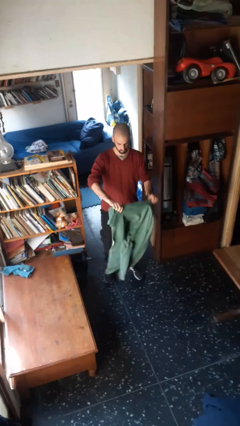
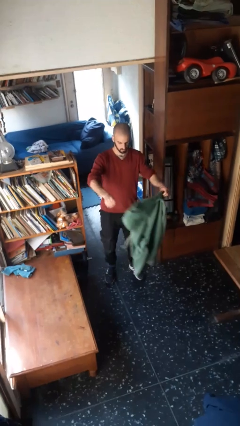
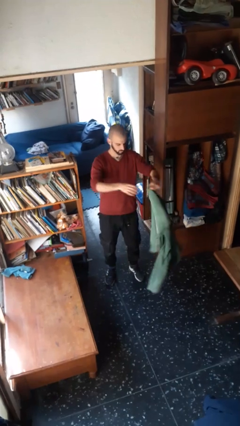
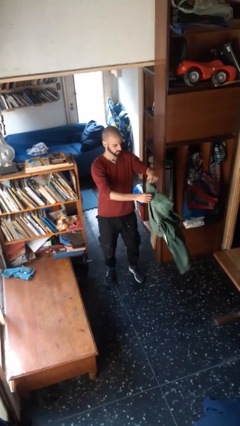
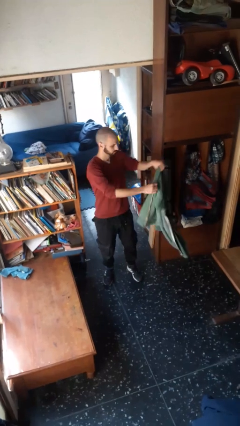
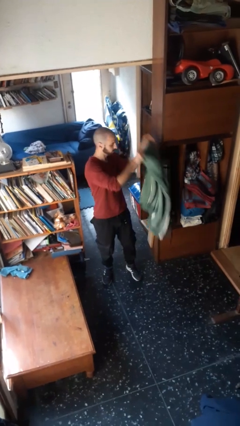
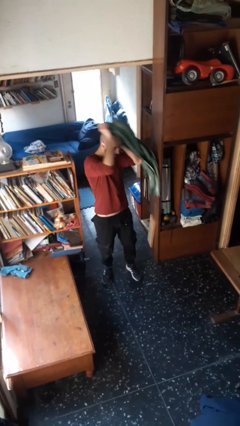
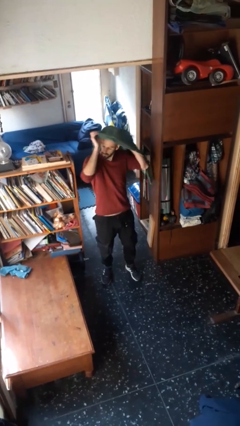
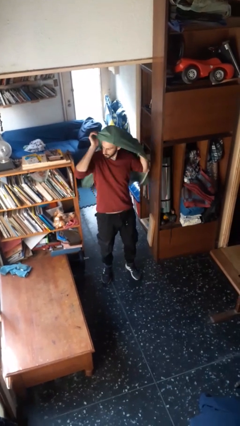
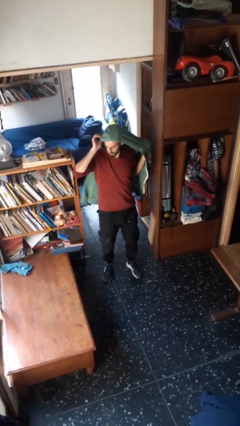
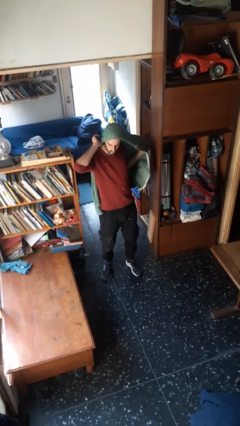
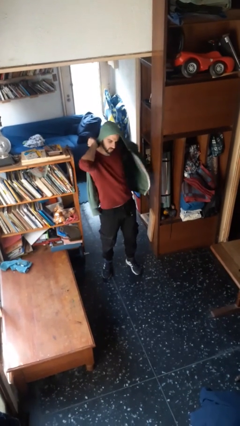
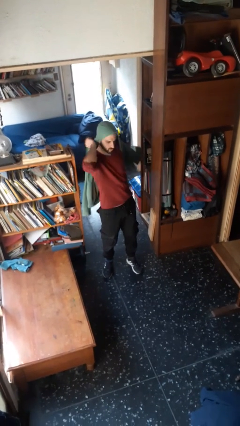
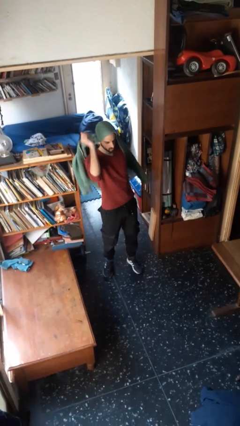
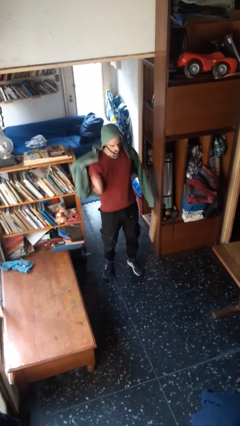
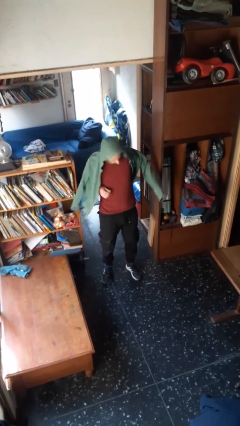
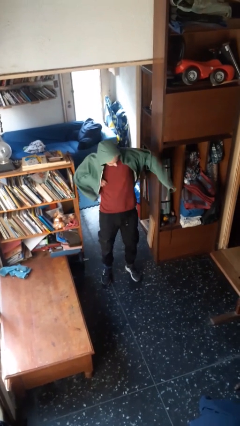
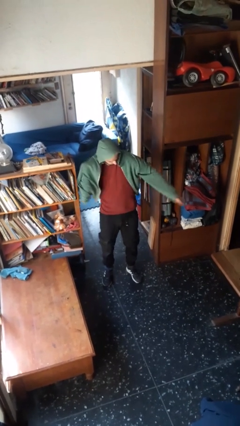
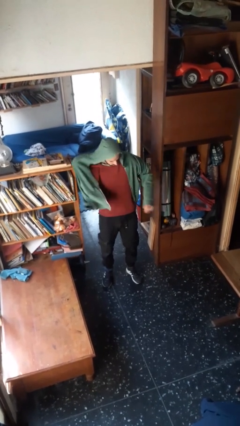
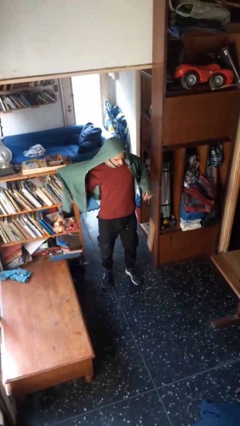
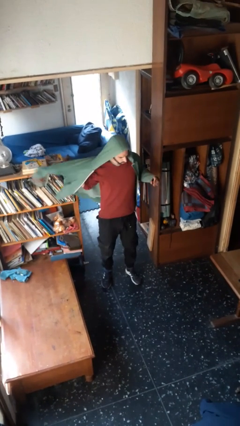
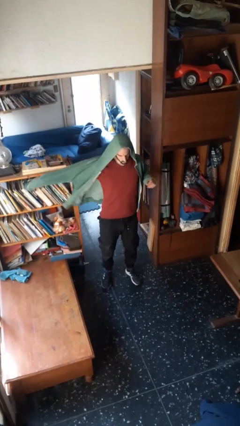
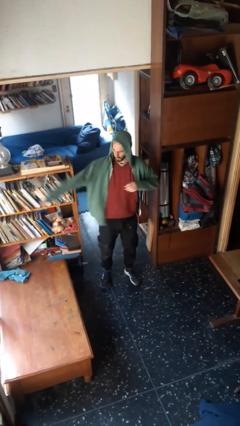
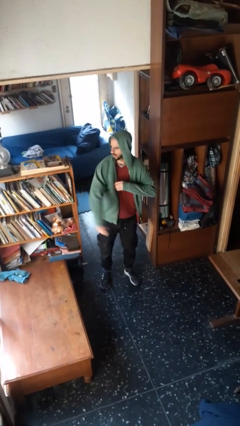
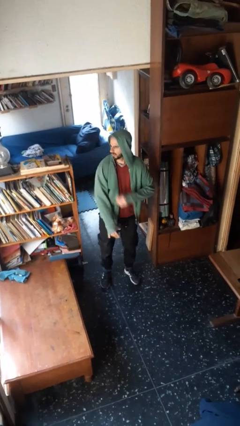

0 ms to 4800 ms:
person puts on hoodie

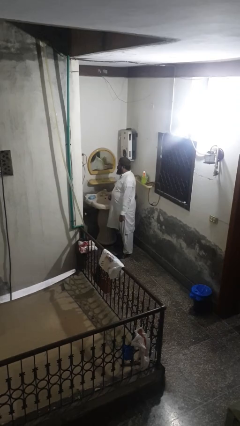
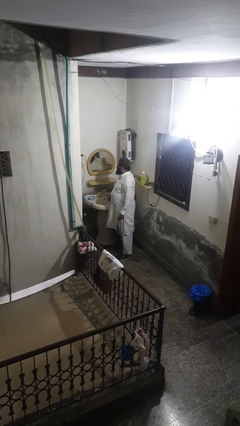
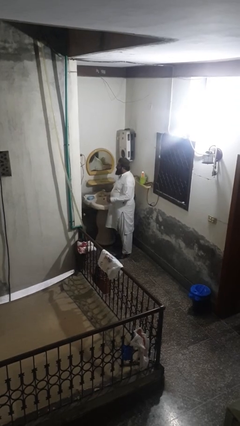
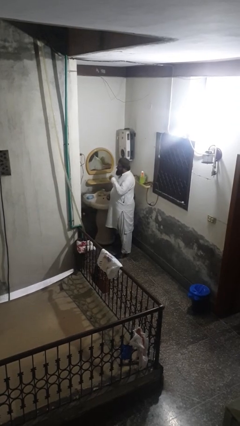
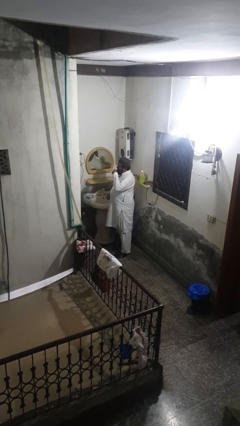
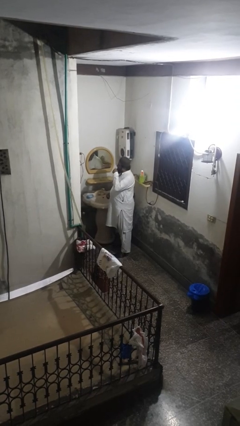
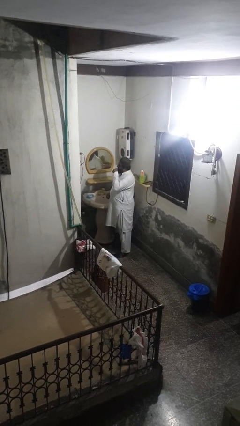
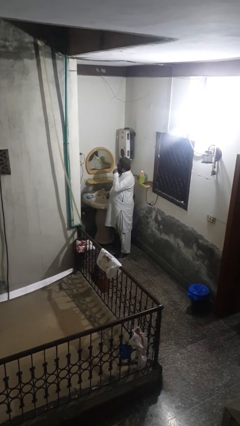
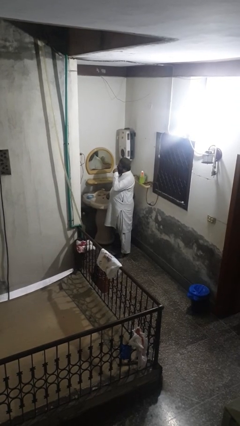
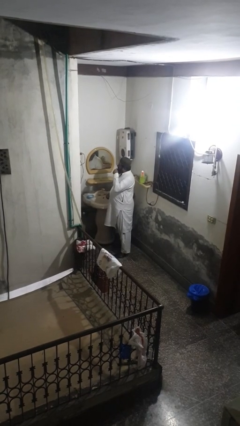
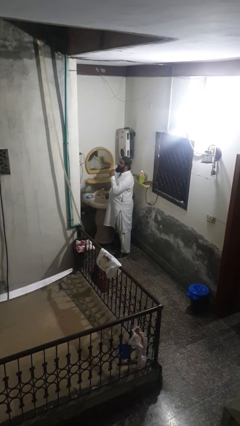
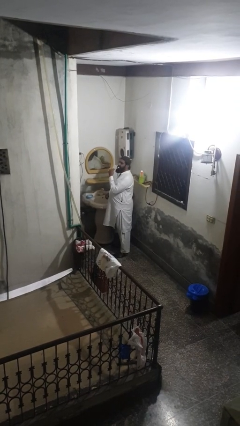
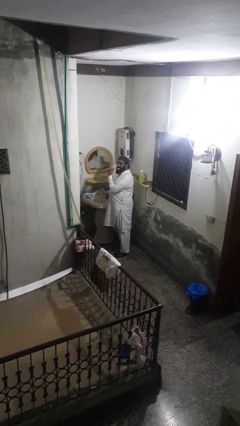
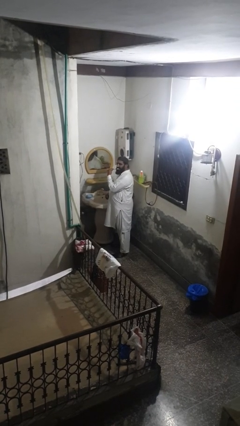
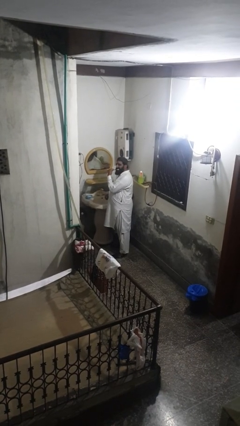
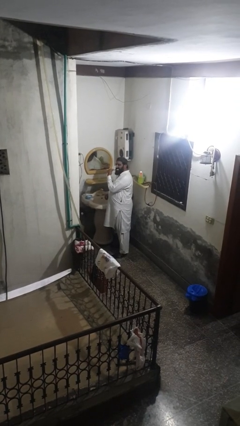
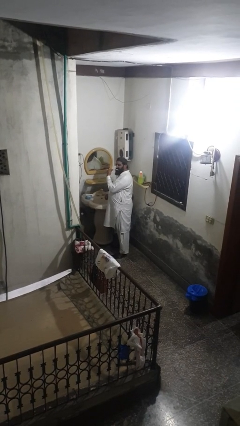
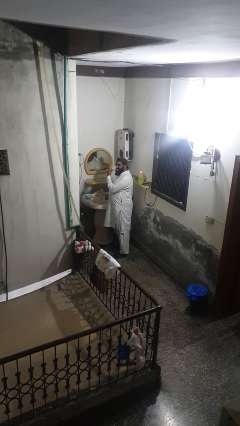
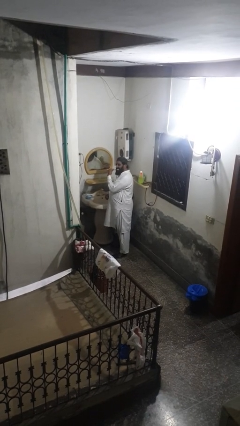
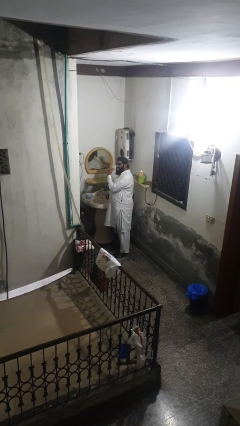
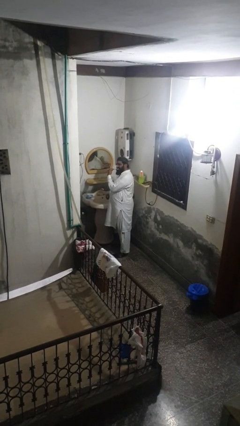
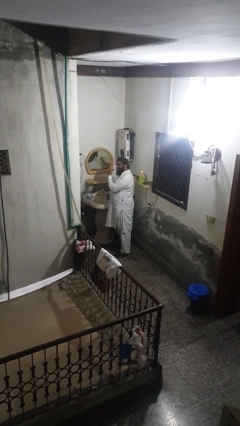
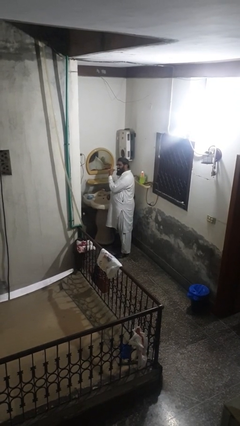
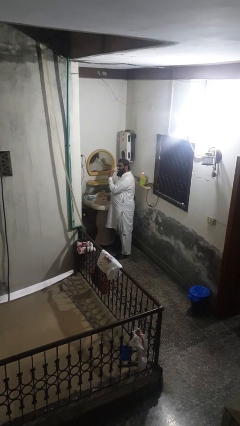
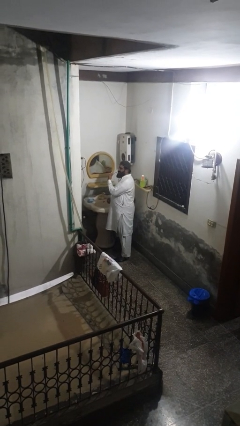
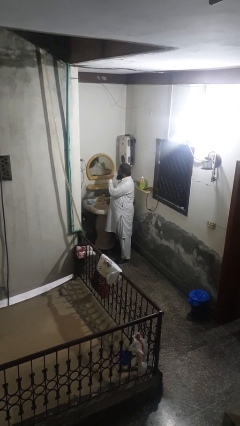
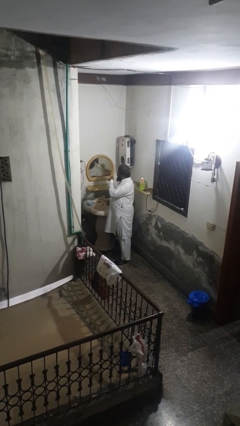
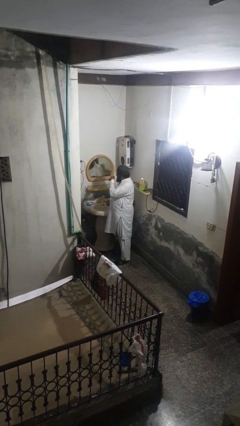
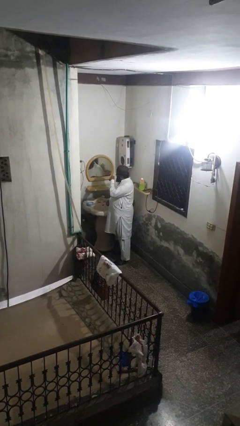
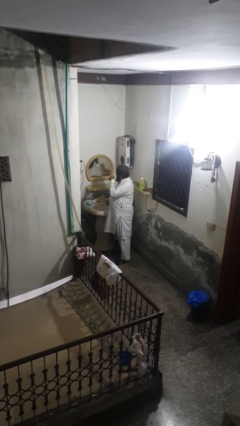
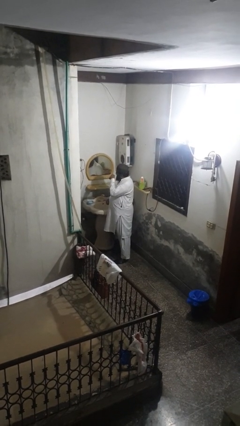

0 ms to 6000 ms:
person brushes teeth

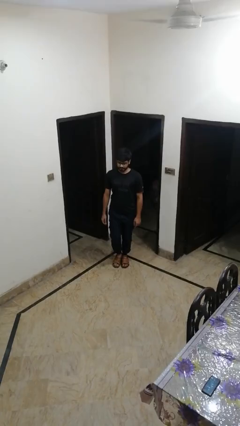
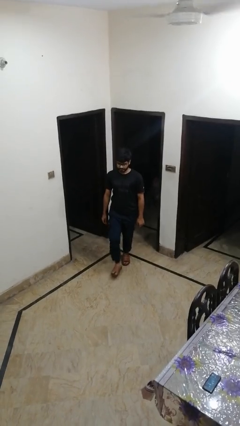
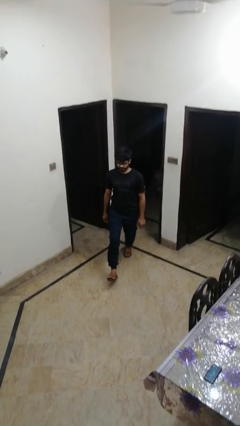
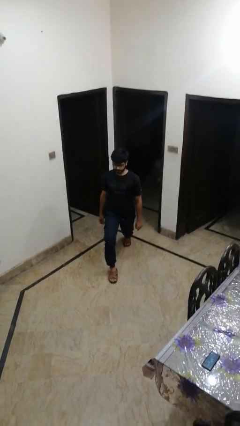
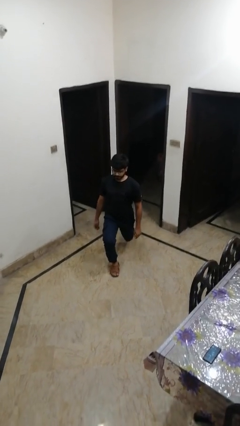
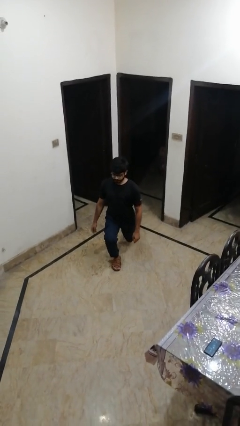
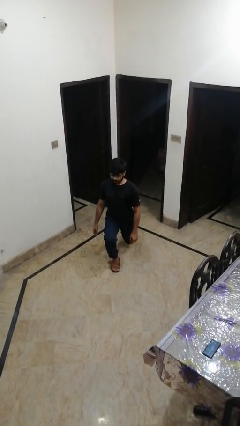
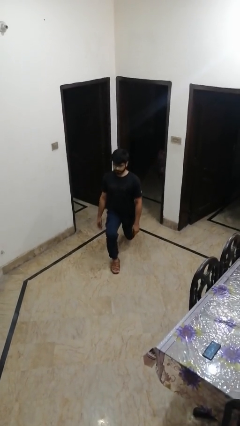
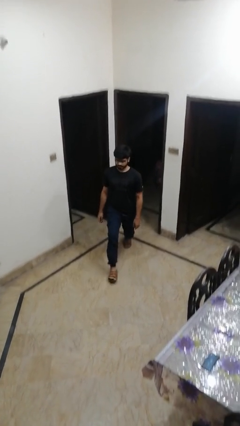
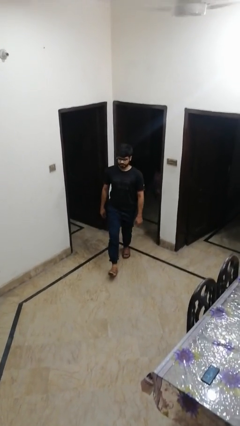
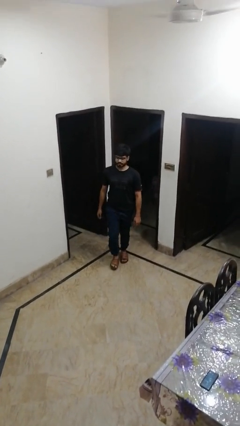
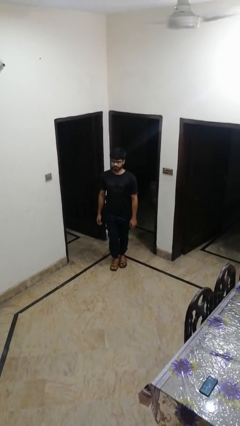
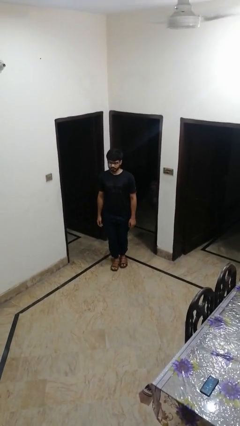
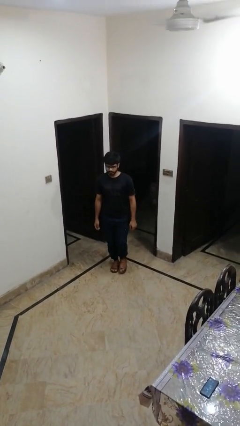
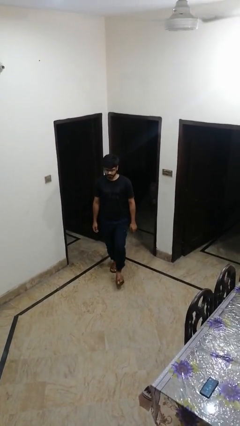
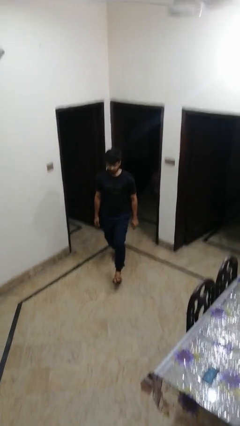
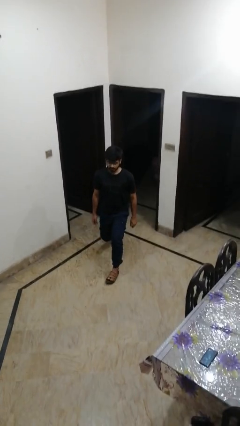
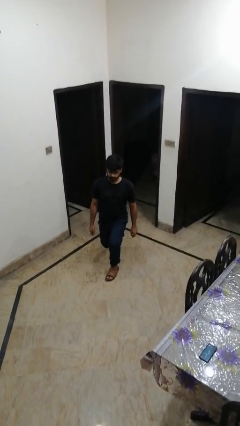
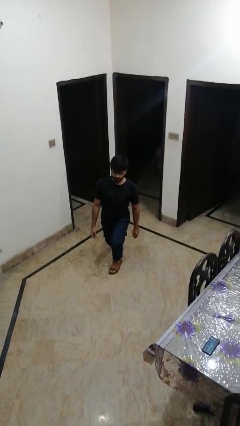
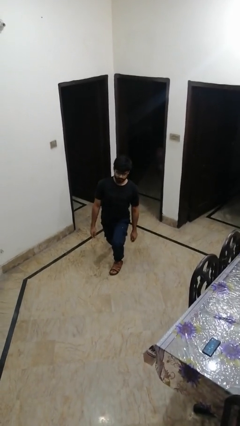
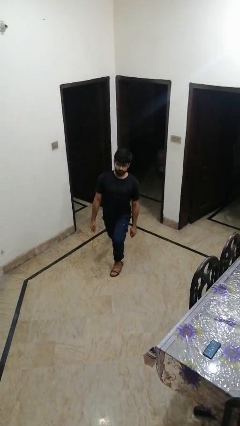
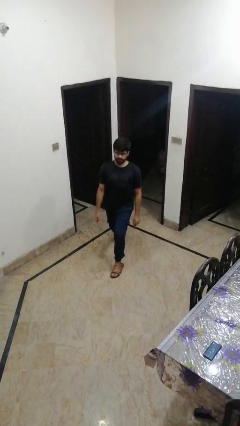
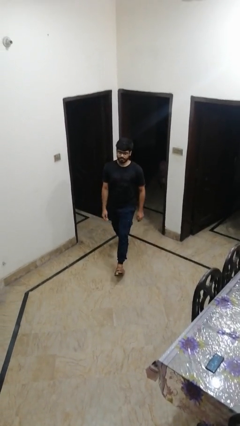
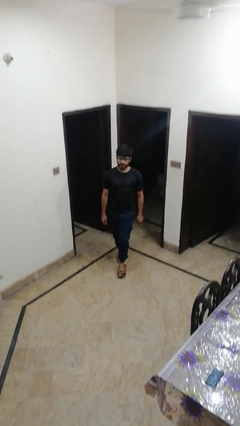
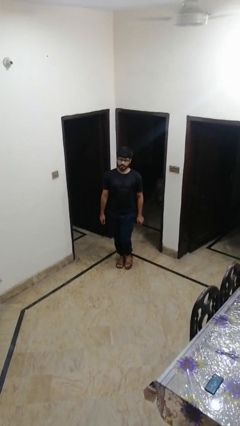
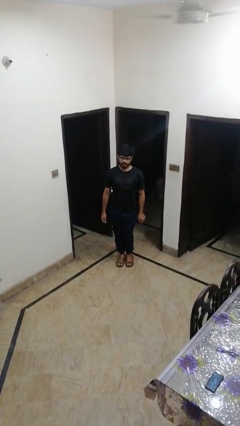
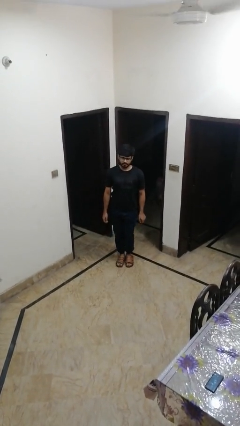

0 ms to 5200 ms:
person exercises with lunges

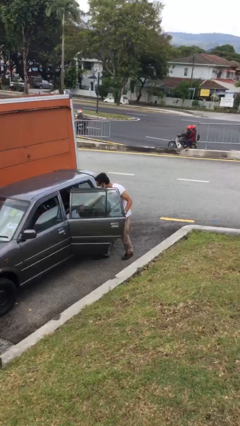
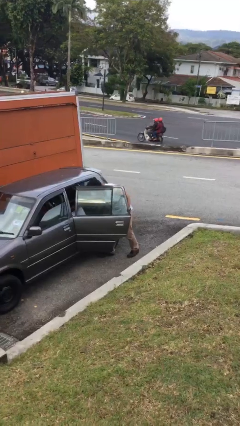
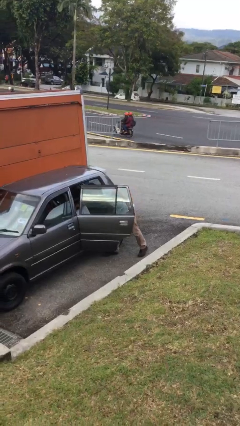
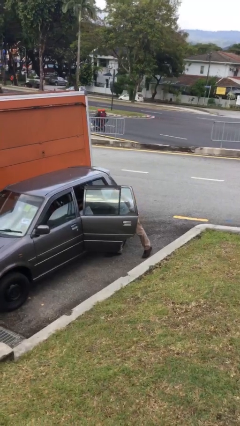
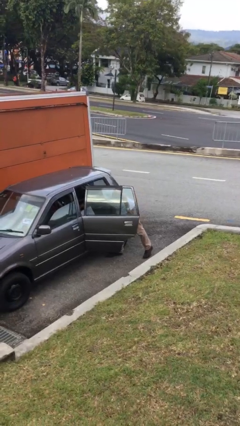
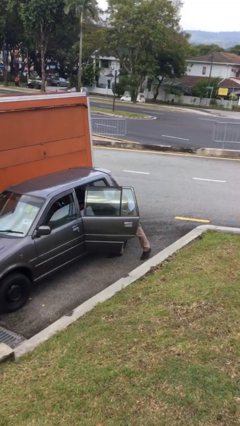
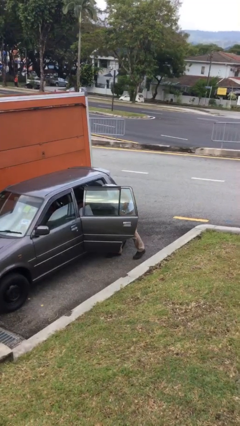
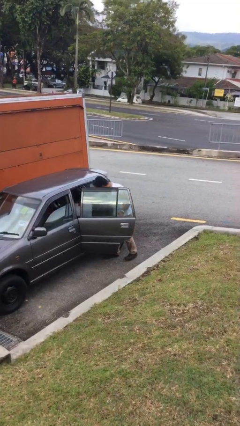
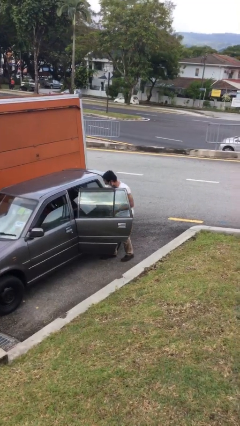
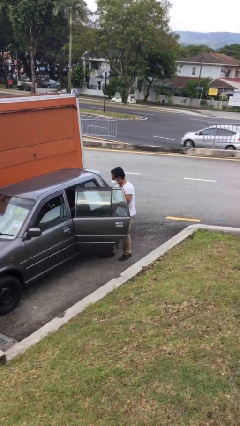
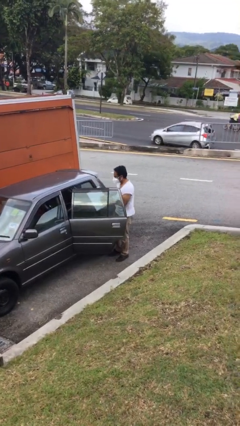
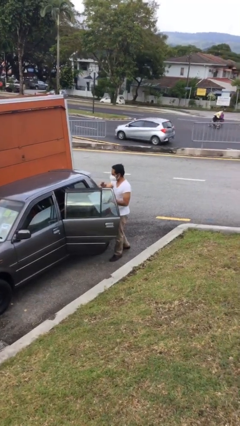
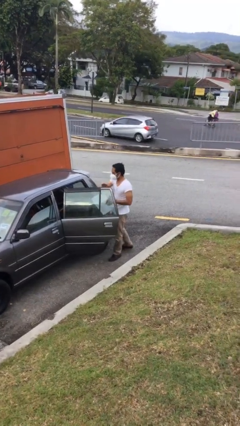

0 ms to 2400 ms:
person unloads car
